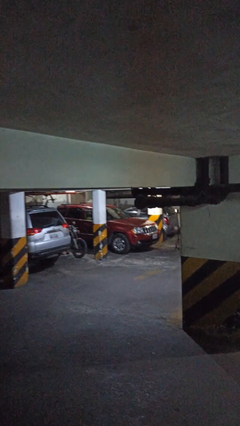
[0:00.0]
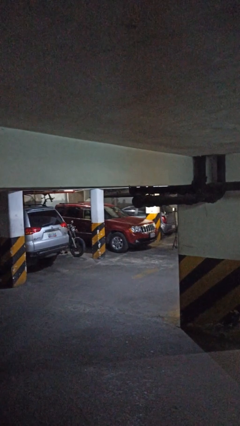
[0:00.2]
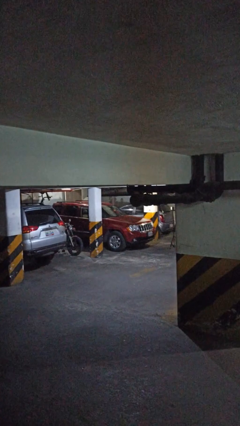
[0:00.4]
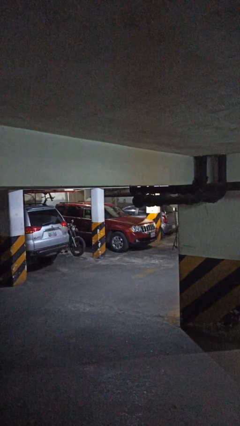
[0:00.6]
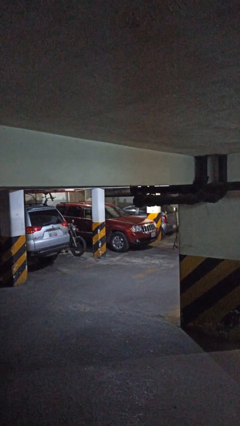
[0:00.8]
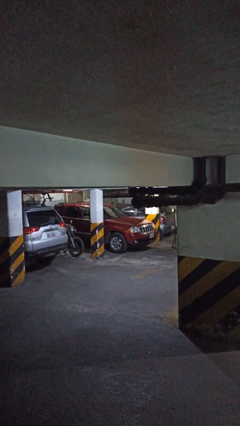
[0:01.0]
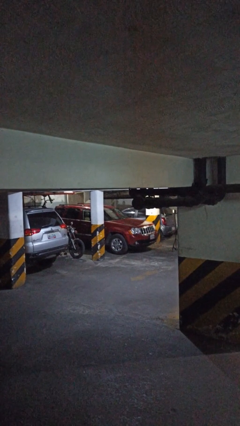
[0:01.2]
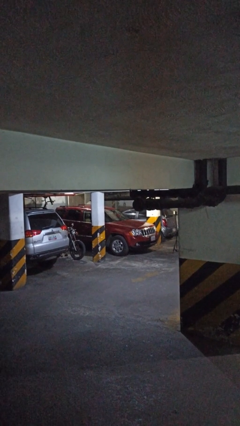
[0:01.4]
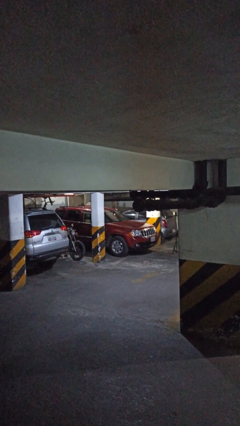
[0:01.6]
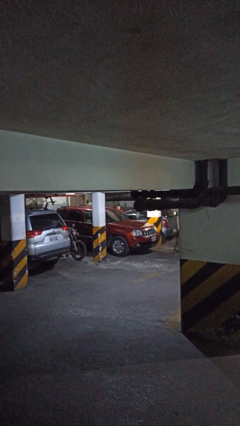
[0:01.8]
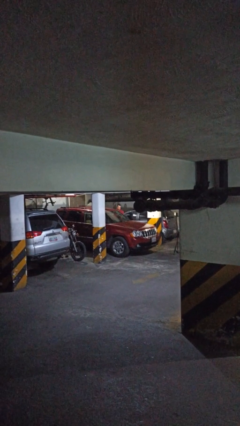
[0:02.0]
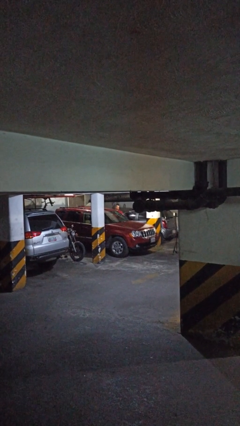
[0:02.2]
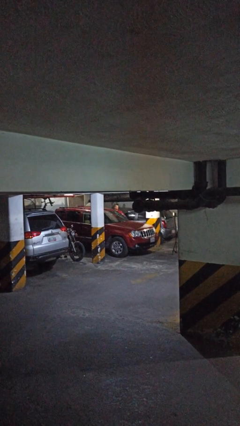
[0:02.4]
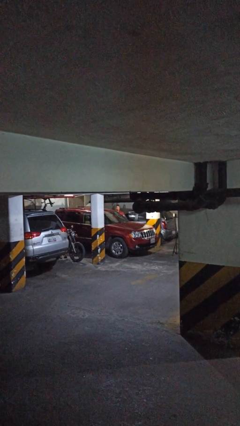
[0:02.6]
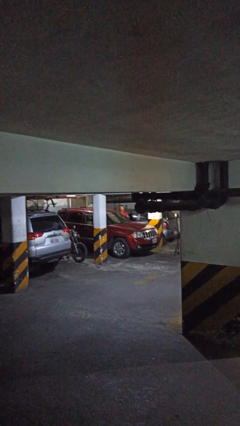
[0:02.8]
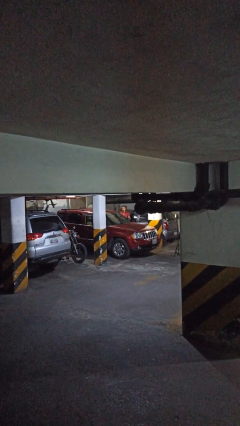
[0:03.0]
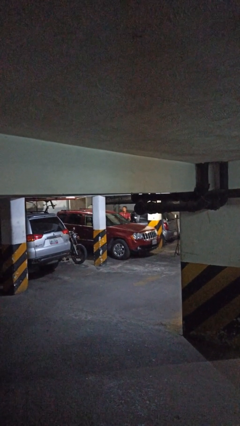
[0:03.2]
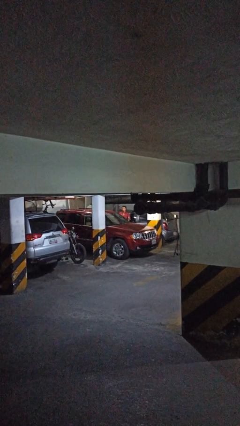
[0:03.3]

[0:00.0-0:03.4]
person exits car

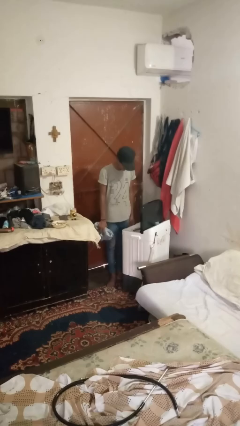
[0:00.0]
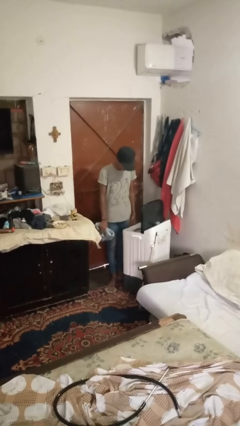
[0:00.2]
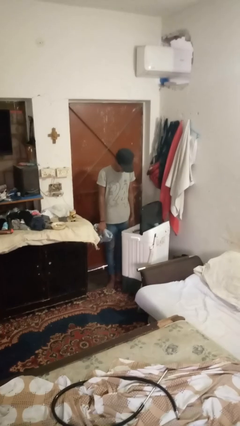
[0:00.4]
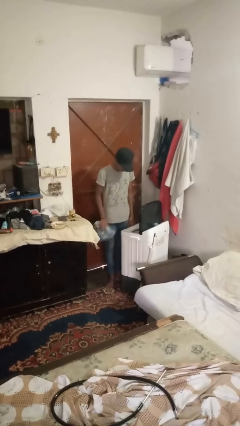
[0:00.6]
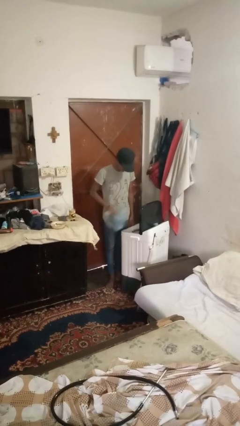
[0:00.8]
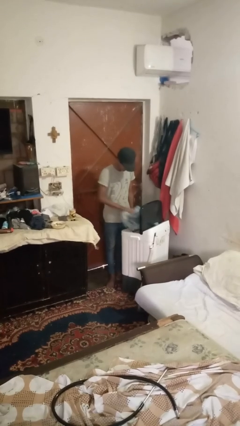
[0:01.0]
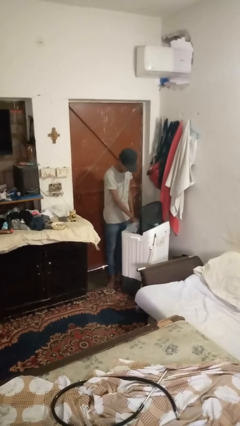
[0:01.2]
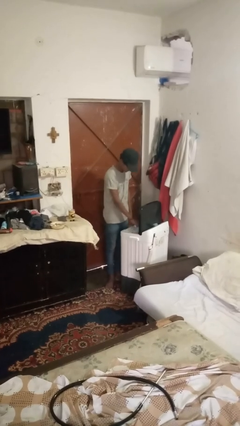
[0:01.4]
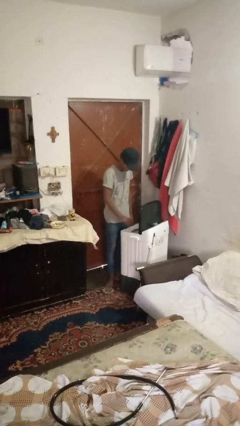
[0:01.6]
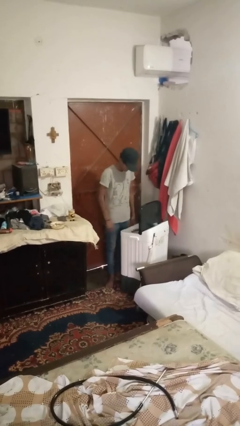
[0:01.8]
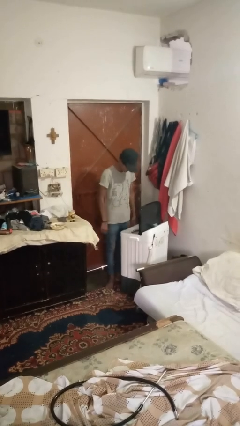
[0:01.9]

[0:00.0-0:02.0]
person loads clotheswasher

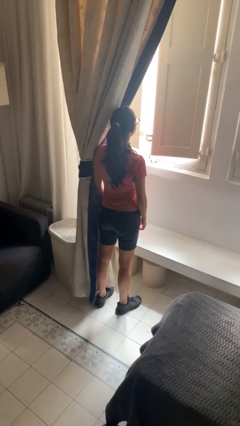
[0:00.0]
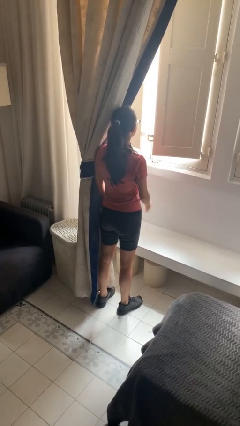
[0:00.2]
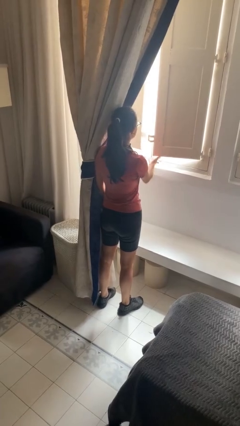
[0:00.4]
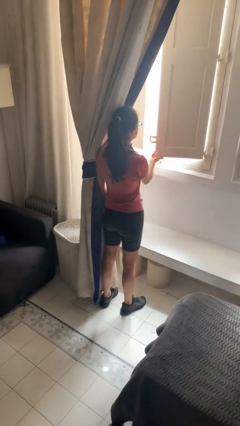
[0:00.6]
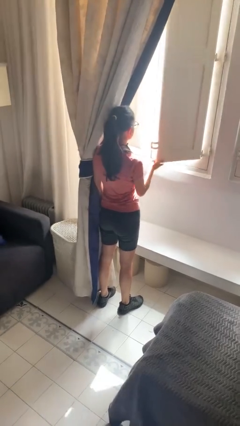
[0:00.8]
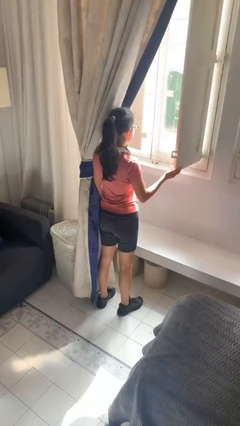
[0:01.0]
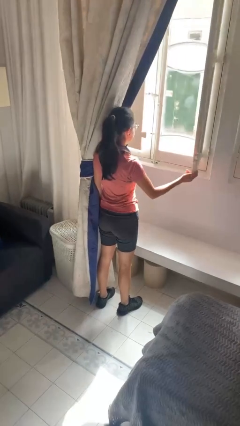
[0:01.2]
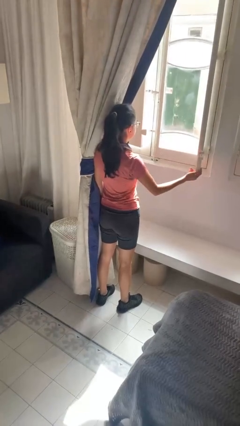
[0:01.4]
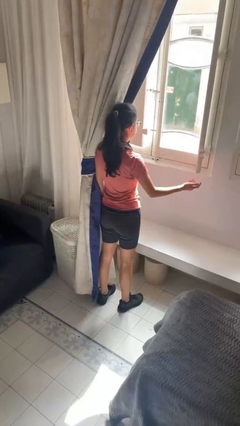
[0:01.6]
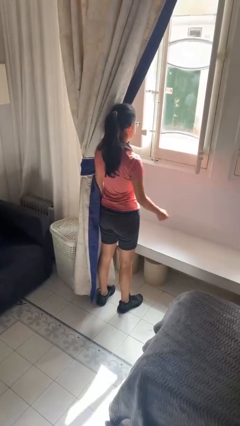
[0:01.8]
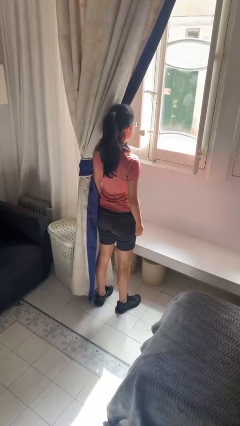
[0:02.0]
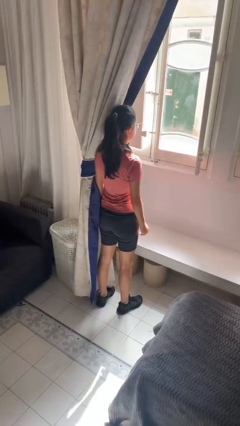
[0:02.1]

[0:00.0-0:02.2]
person opens home window

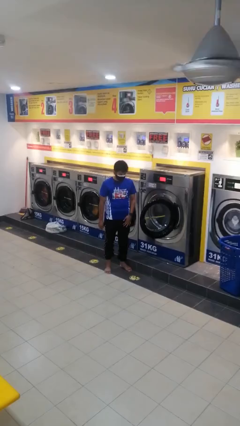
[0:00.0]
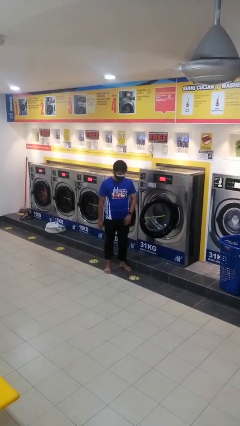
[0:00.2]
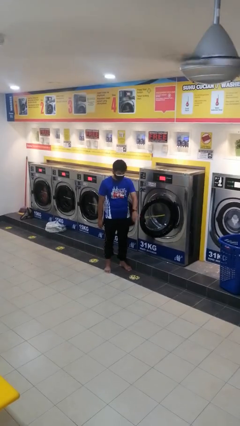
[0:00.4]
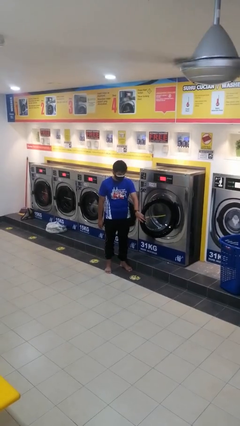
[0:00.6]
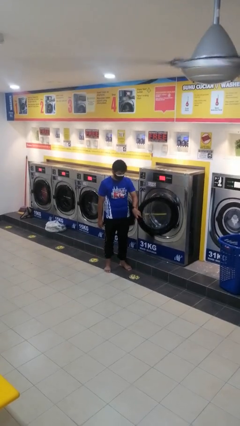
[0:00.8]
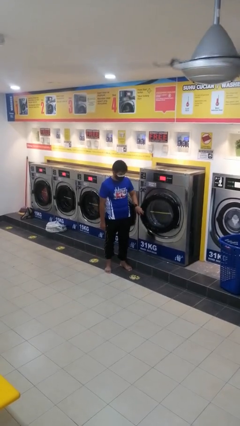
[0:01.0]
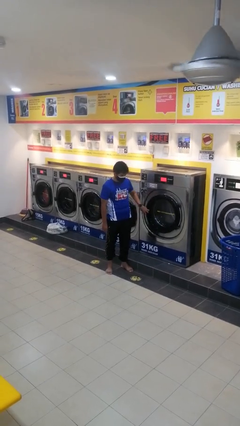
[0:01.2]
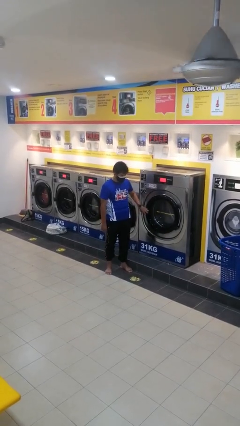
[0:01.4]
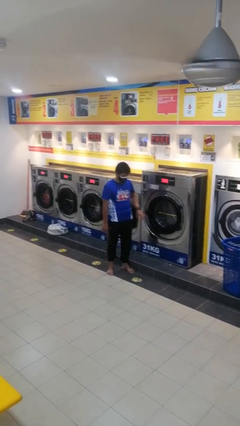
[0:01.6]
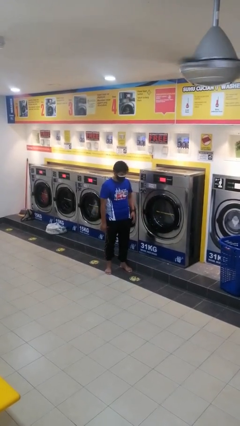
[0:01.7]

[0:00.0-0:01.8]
person closes clothes washer

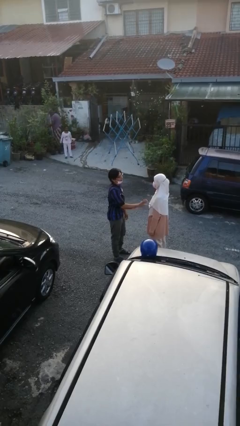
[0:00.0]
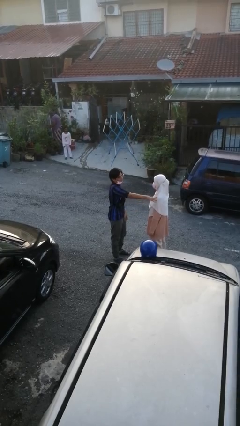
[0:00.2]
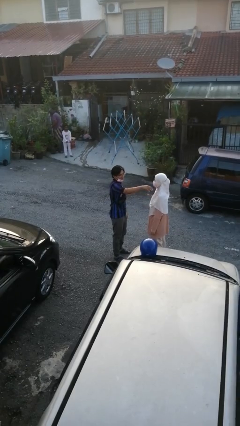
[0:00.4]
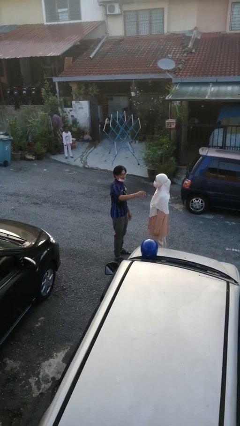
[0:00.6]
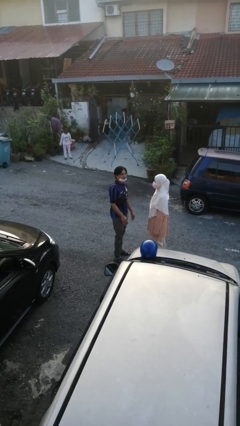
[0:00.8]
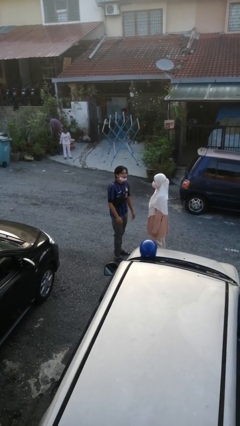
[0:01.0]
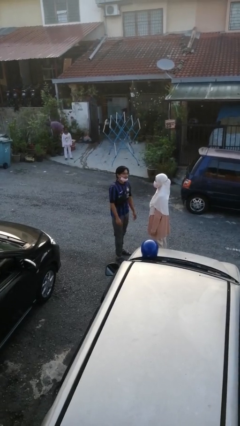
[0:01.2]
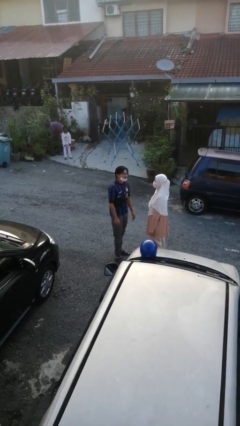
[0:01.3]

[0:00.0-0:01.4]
person shoves person

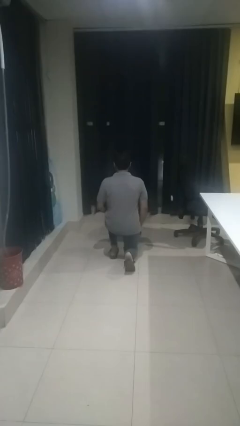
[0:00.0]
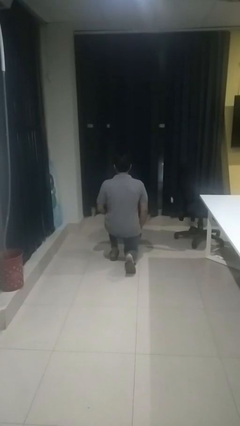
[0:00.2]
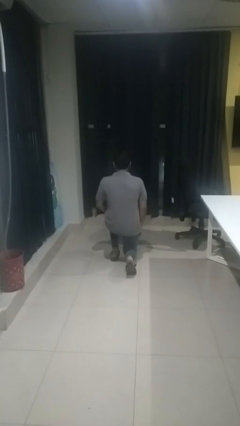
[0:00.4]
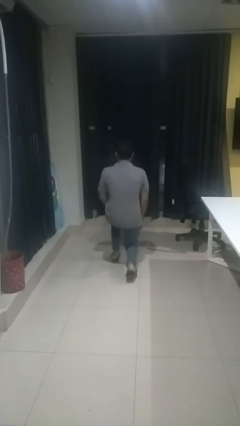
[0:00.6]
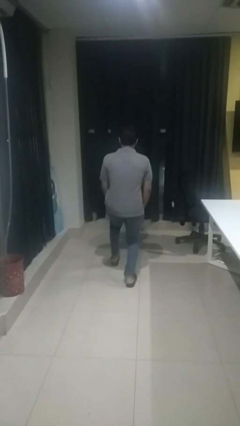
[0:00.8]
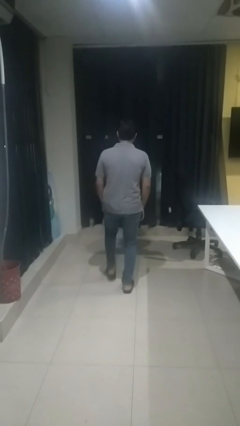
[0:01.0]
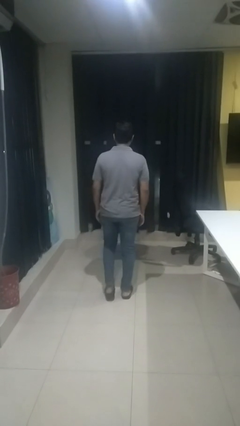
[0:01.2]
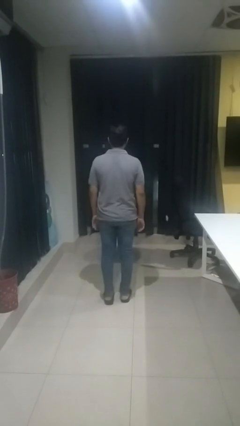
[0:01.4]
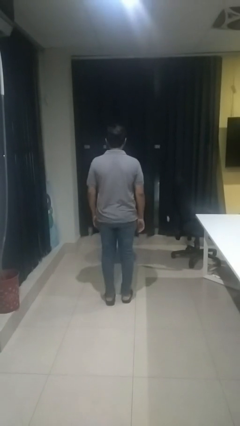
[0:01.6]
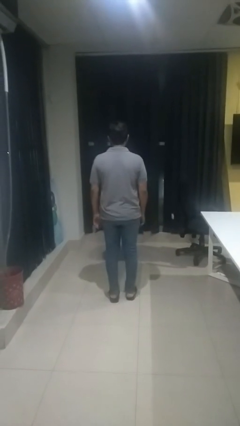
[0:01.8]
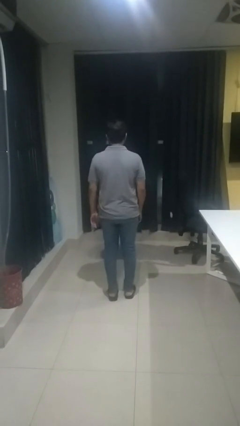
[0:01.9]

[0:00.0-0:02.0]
person stands up from floor
